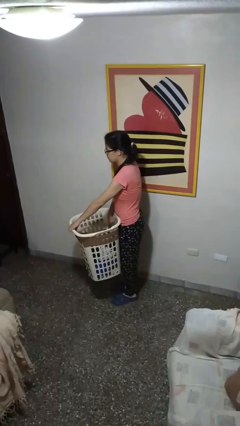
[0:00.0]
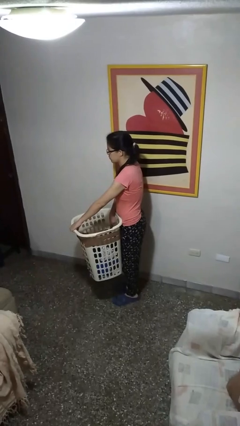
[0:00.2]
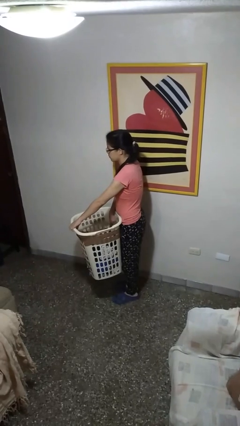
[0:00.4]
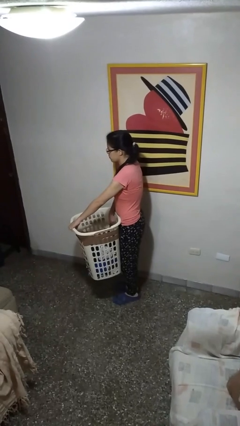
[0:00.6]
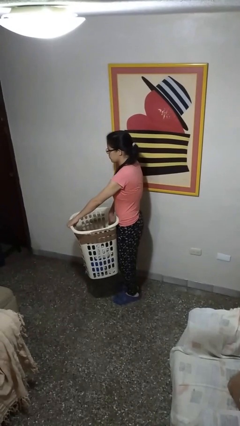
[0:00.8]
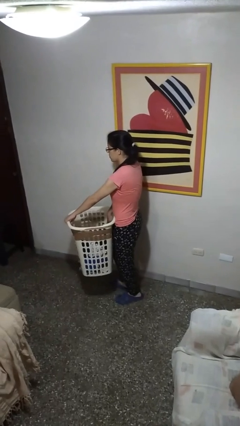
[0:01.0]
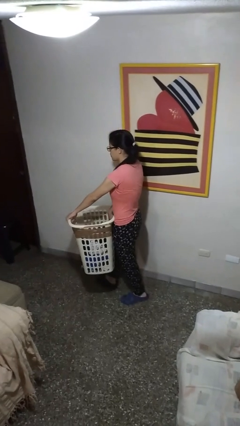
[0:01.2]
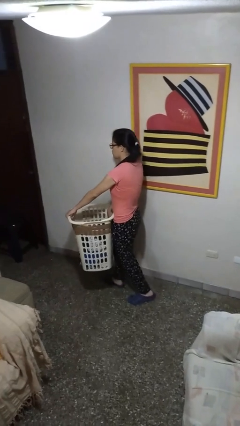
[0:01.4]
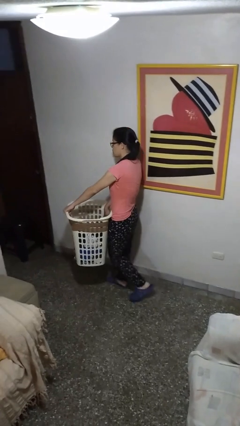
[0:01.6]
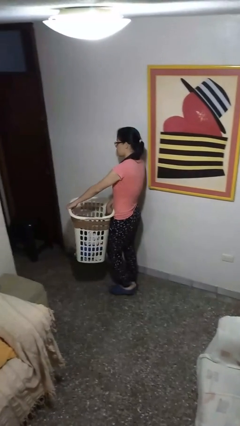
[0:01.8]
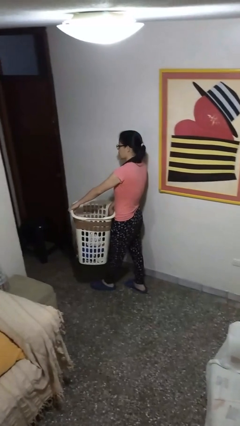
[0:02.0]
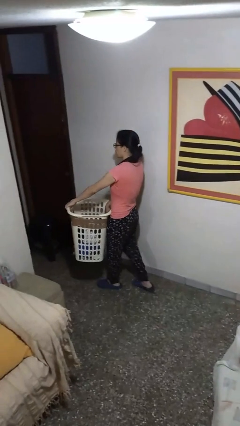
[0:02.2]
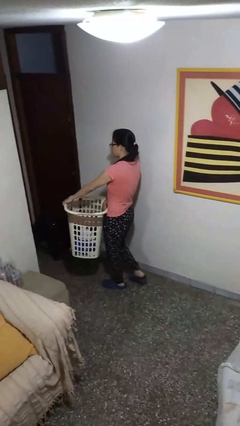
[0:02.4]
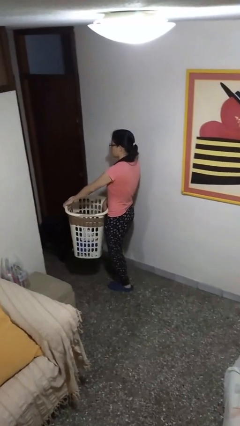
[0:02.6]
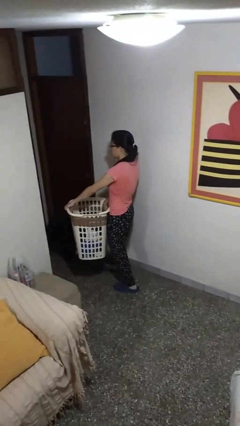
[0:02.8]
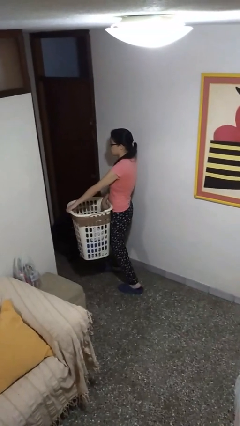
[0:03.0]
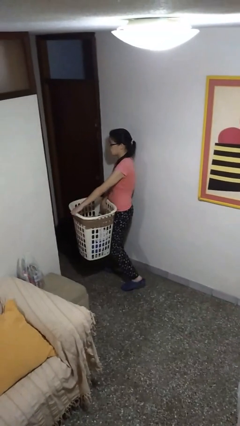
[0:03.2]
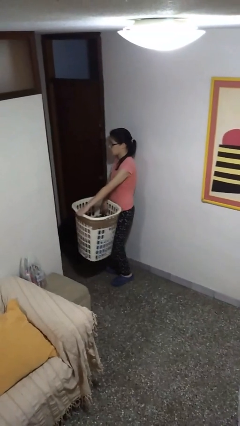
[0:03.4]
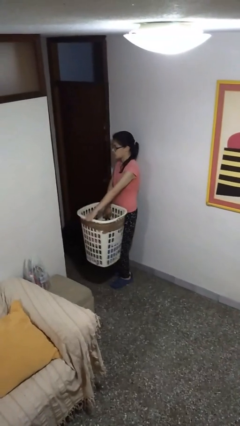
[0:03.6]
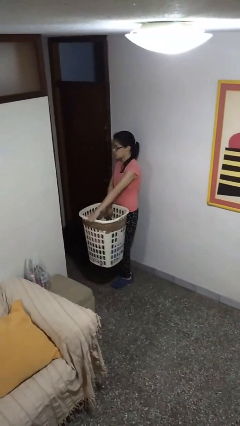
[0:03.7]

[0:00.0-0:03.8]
person carries laundry basket

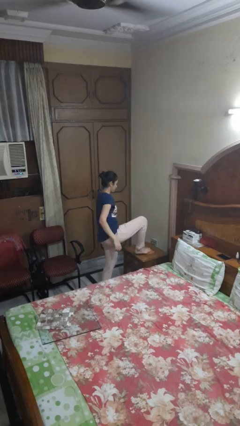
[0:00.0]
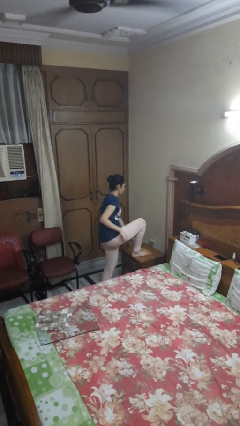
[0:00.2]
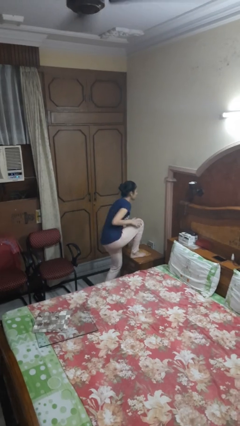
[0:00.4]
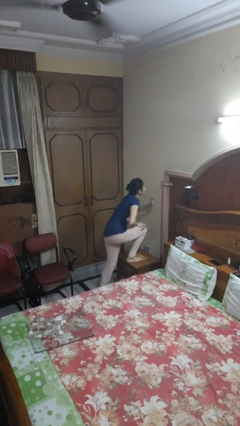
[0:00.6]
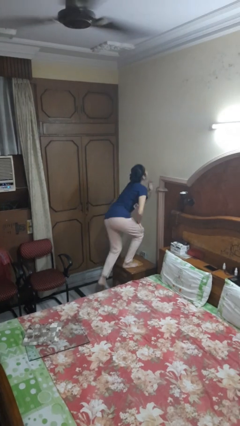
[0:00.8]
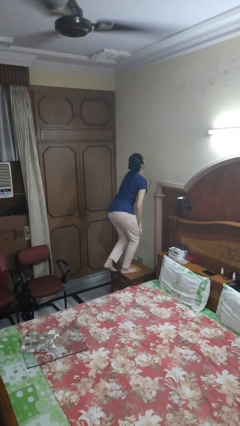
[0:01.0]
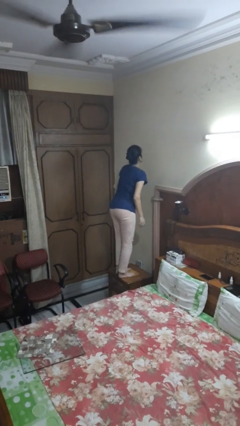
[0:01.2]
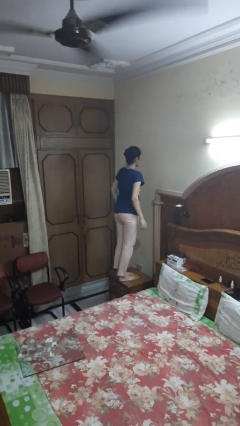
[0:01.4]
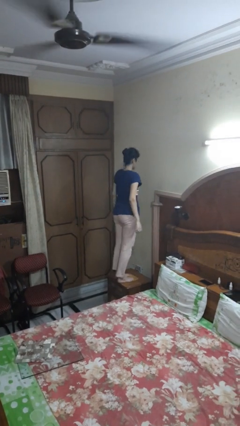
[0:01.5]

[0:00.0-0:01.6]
person climbs on table

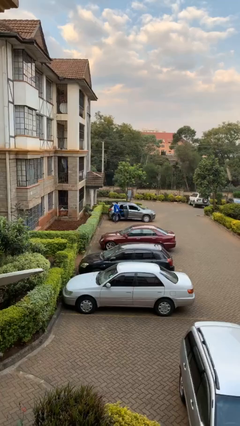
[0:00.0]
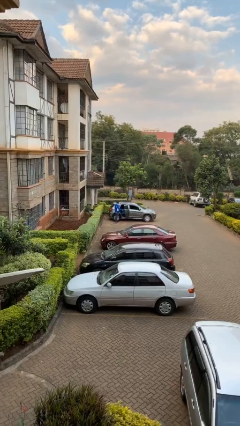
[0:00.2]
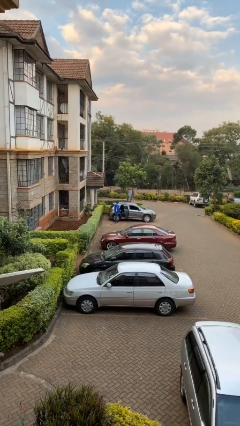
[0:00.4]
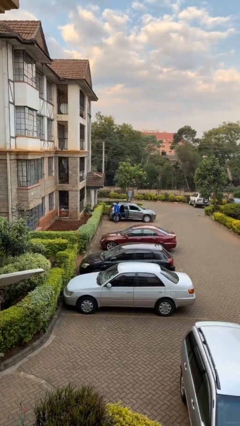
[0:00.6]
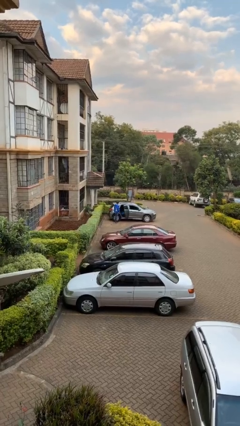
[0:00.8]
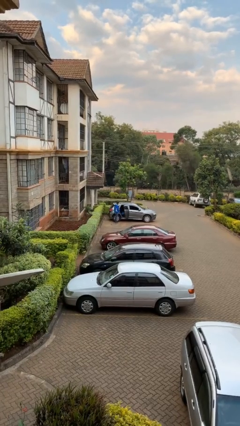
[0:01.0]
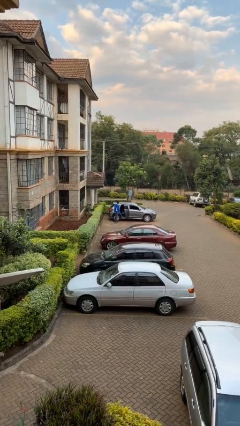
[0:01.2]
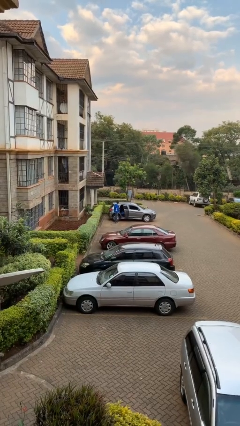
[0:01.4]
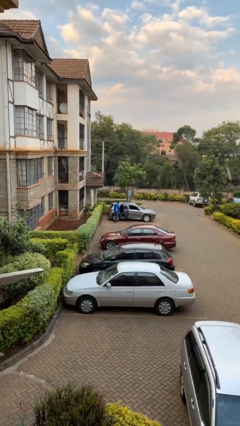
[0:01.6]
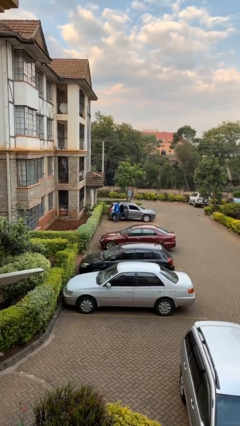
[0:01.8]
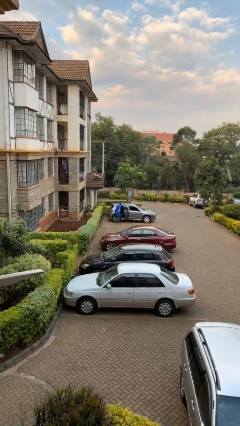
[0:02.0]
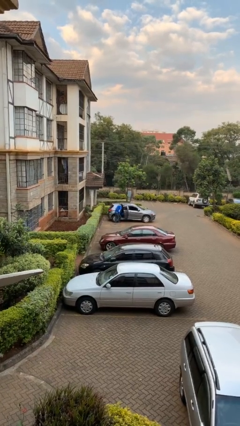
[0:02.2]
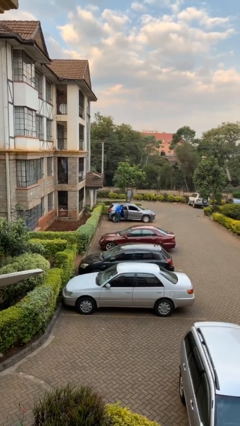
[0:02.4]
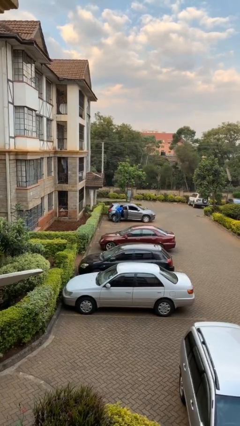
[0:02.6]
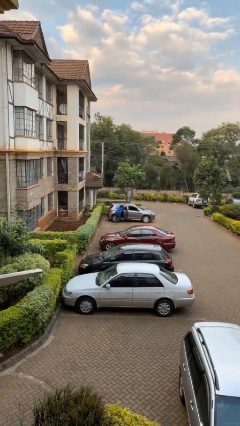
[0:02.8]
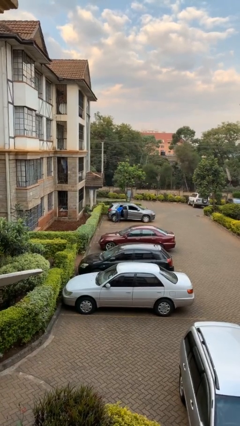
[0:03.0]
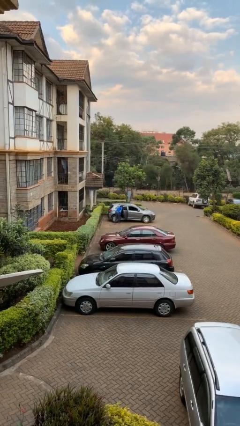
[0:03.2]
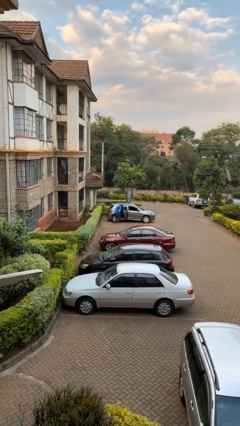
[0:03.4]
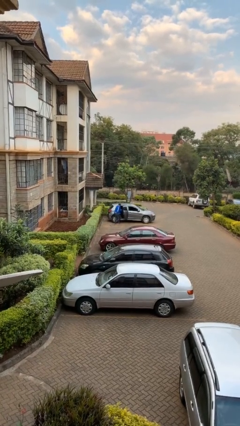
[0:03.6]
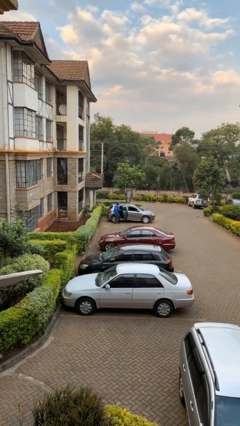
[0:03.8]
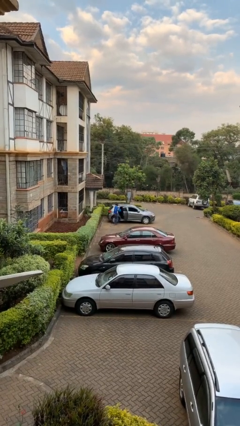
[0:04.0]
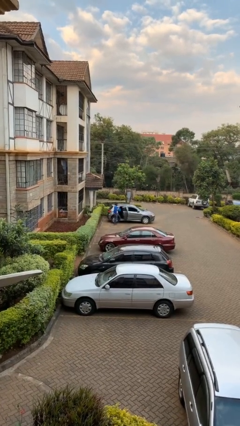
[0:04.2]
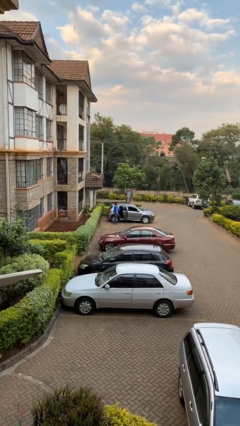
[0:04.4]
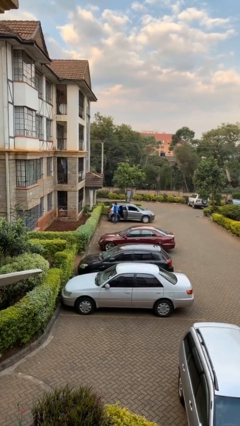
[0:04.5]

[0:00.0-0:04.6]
person unloads car

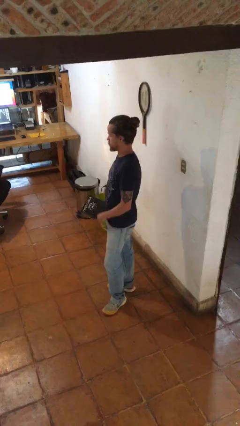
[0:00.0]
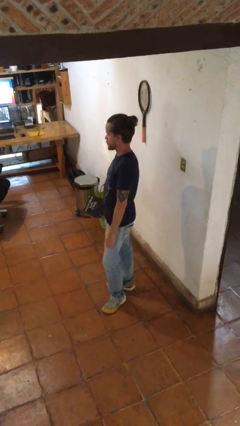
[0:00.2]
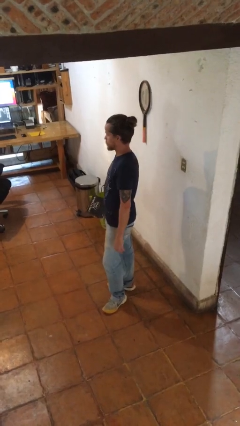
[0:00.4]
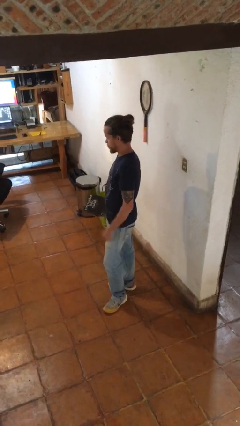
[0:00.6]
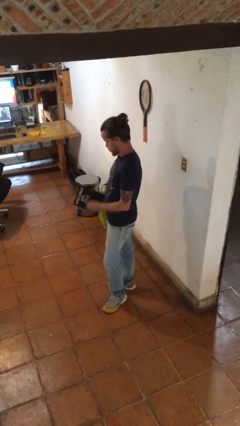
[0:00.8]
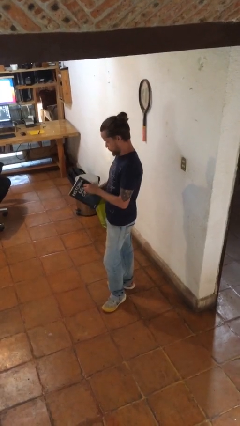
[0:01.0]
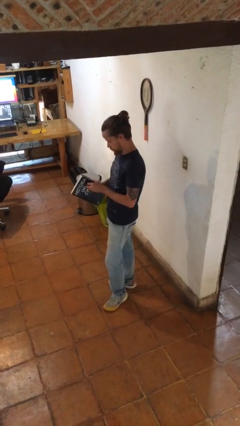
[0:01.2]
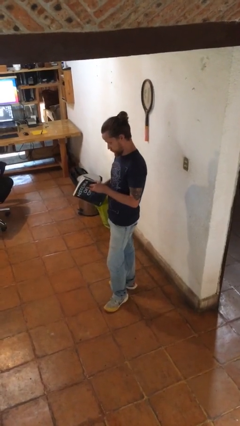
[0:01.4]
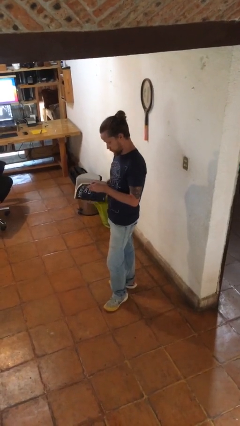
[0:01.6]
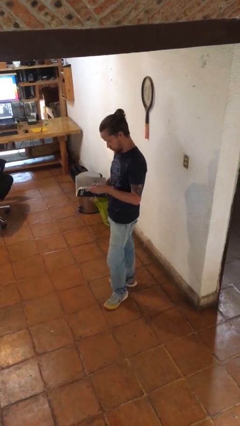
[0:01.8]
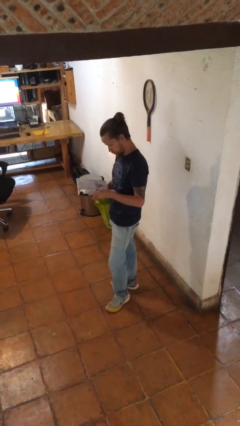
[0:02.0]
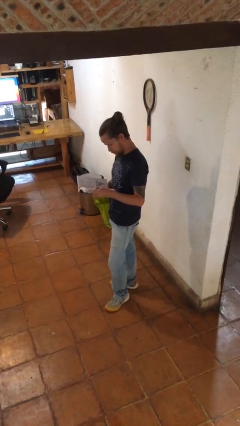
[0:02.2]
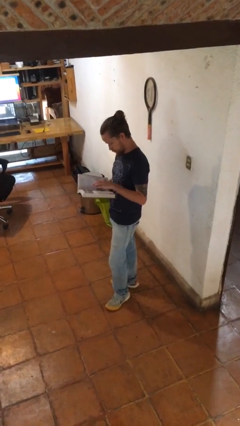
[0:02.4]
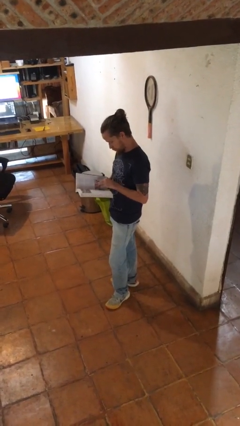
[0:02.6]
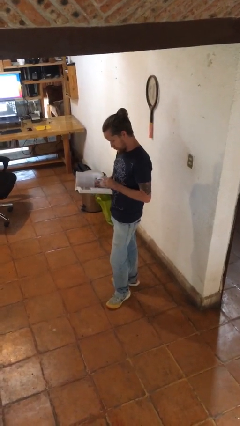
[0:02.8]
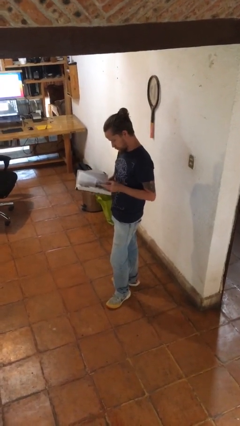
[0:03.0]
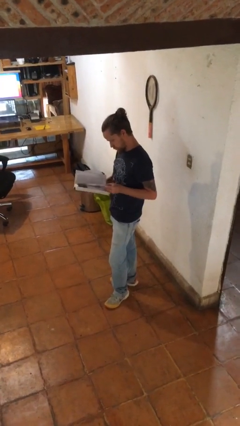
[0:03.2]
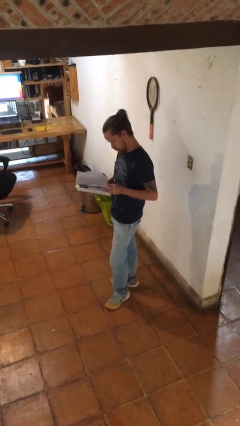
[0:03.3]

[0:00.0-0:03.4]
person reads book

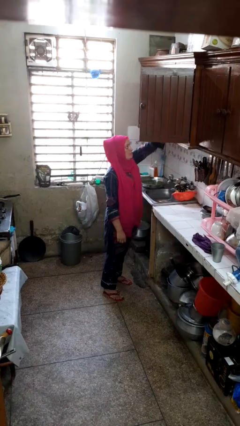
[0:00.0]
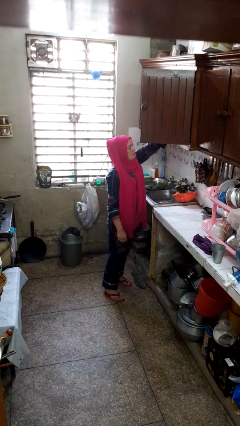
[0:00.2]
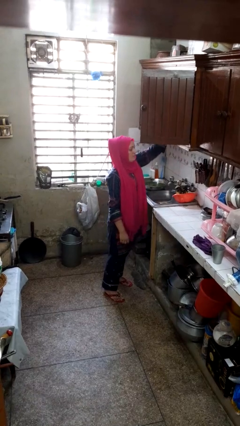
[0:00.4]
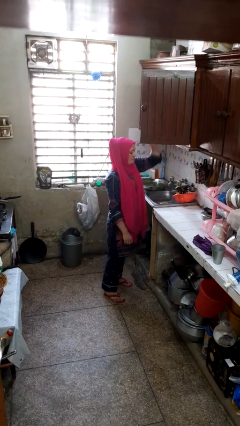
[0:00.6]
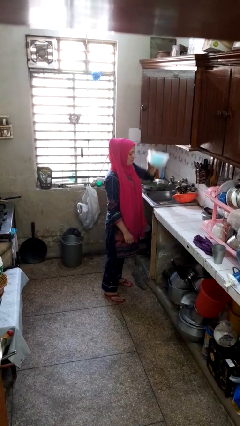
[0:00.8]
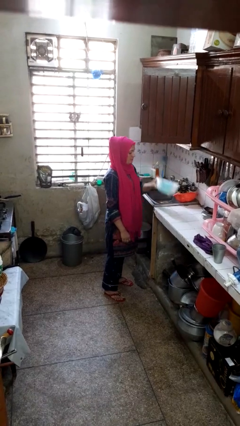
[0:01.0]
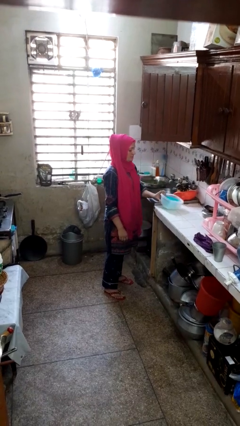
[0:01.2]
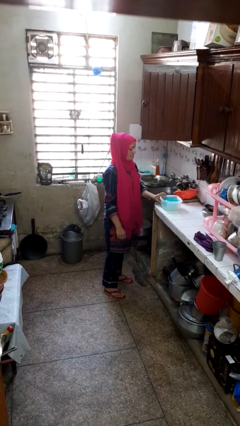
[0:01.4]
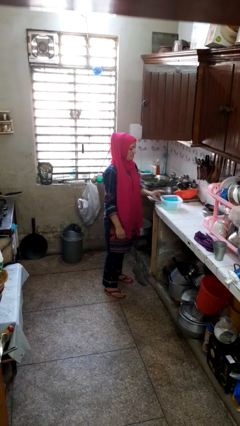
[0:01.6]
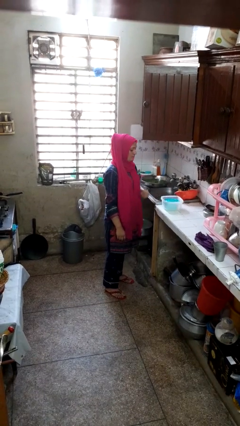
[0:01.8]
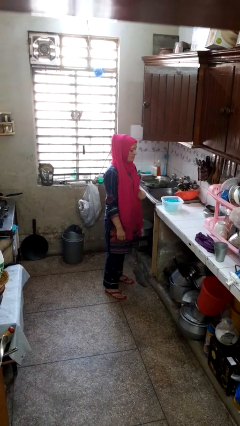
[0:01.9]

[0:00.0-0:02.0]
person takes object from cabinet

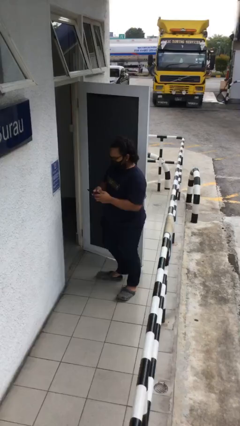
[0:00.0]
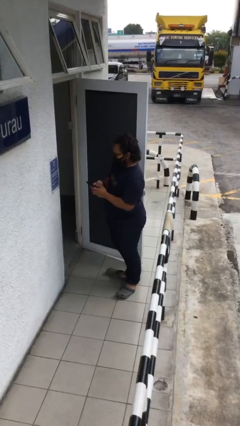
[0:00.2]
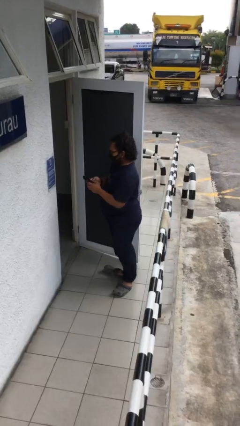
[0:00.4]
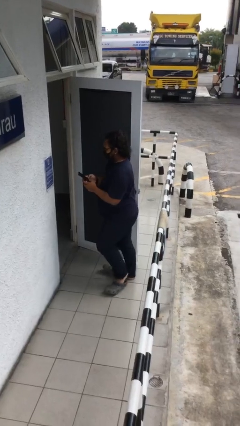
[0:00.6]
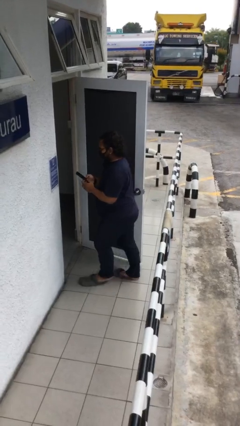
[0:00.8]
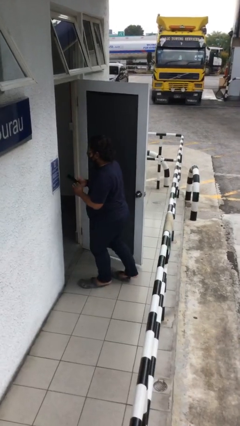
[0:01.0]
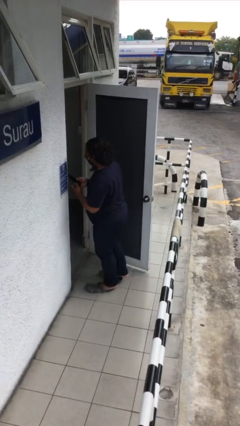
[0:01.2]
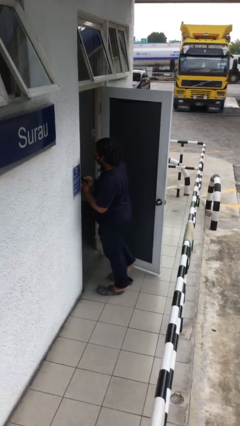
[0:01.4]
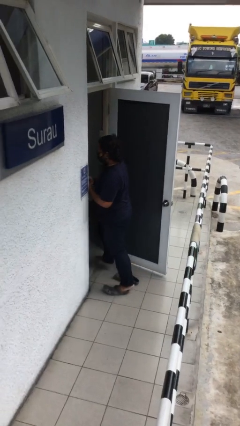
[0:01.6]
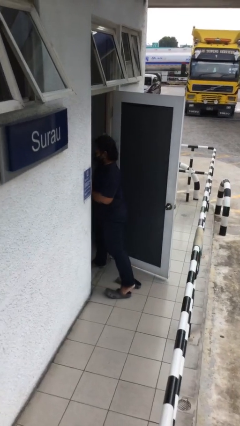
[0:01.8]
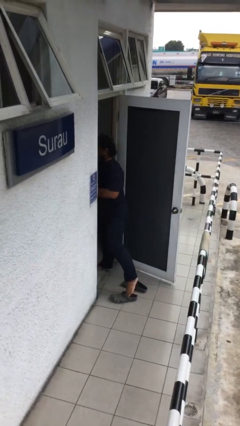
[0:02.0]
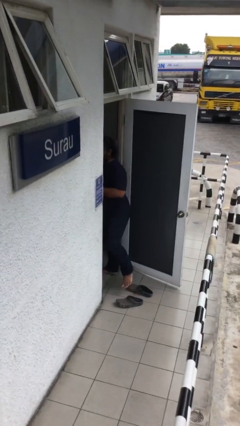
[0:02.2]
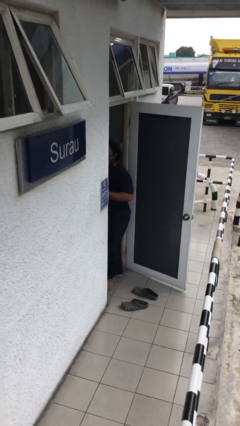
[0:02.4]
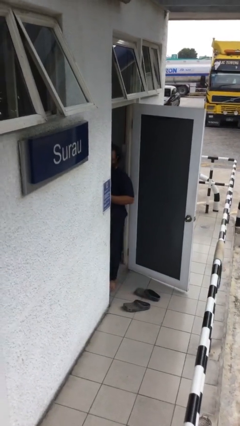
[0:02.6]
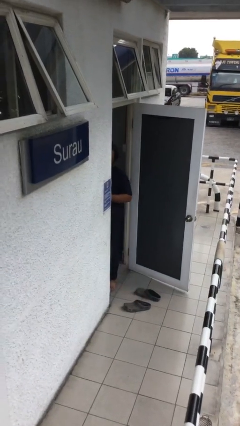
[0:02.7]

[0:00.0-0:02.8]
person exits scene through structure
